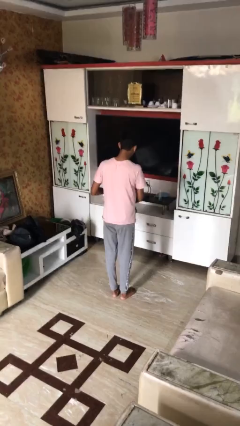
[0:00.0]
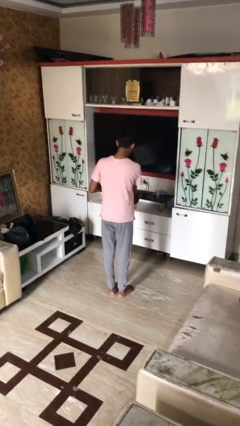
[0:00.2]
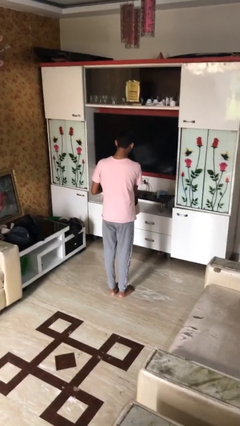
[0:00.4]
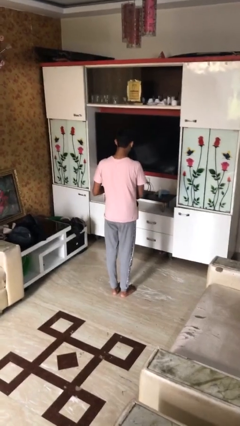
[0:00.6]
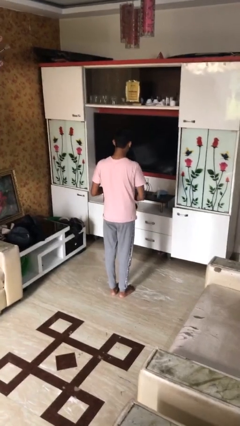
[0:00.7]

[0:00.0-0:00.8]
person puts object into bag

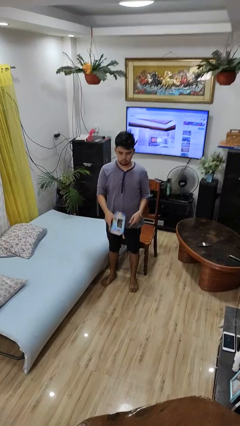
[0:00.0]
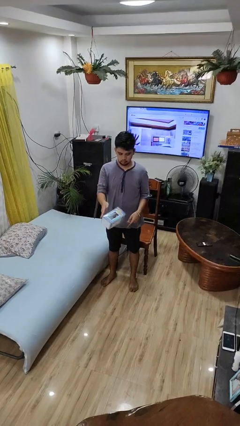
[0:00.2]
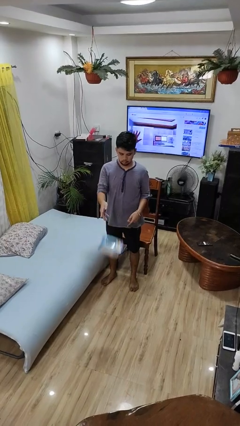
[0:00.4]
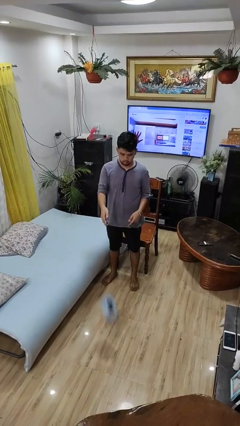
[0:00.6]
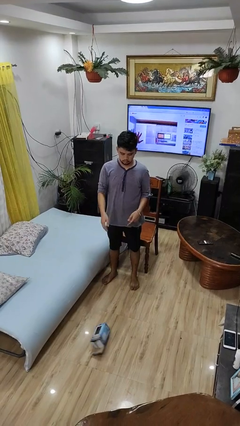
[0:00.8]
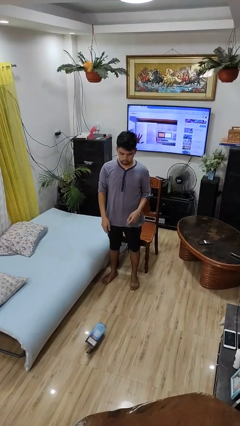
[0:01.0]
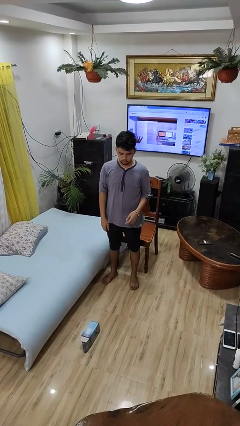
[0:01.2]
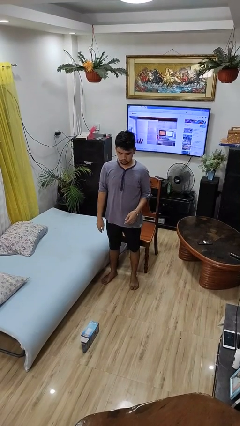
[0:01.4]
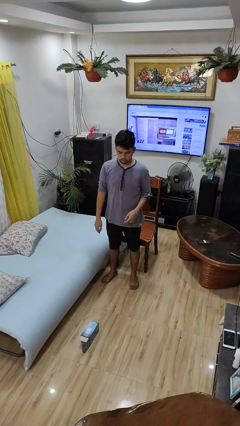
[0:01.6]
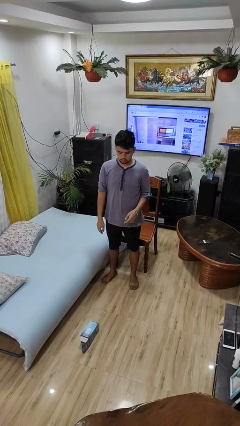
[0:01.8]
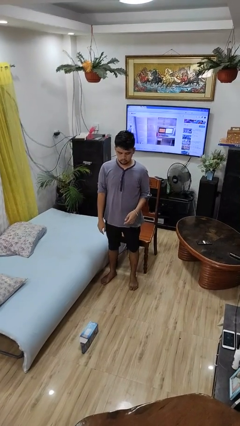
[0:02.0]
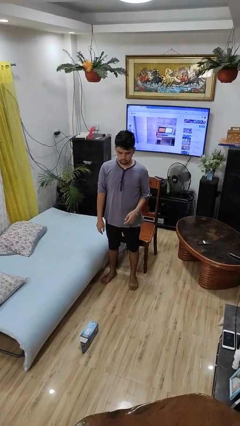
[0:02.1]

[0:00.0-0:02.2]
person throws object to ground

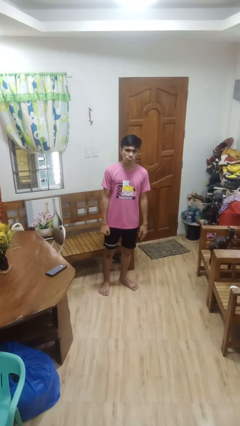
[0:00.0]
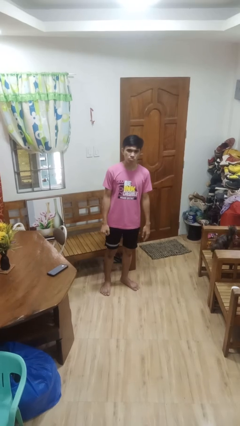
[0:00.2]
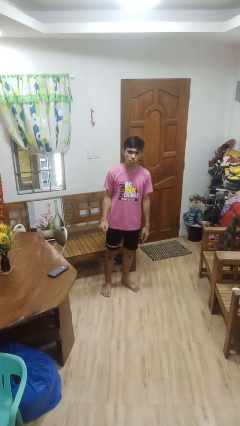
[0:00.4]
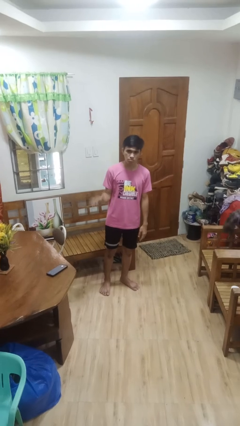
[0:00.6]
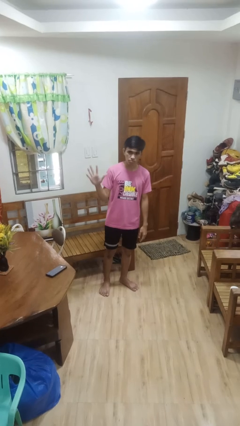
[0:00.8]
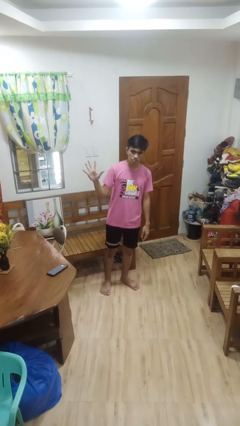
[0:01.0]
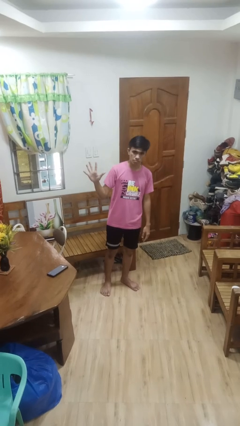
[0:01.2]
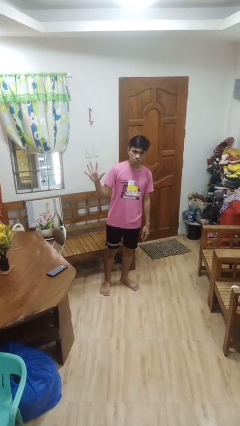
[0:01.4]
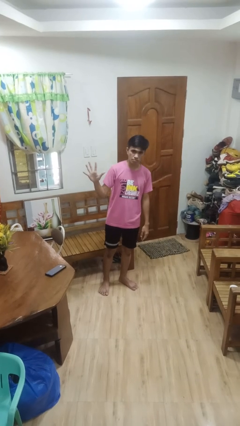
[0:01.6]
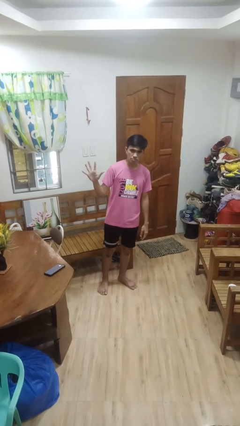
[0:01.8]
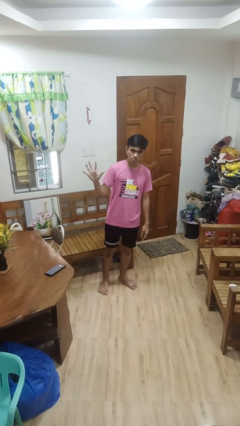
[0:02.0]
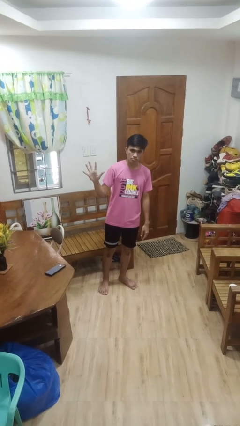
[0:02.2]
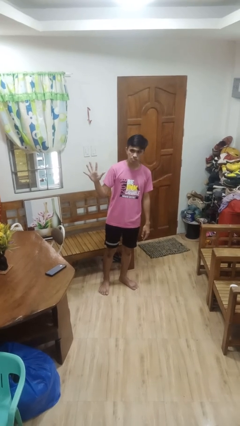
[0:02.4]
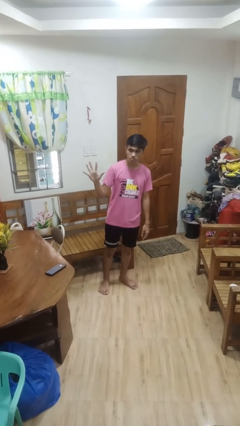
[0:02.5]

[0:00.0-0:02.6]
person gestures number five

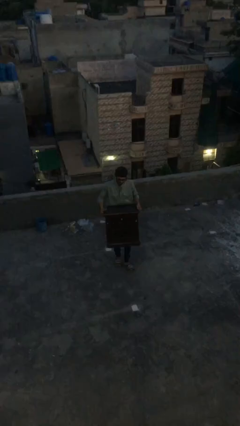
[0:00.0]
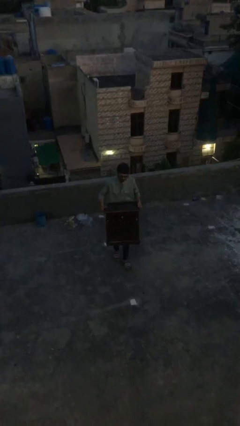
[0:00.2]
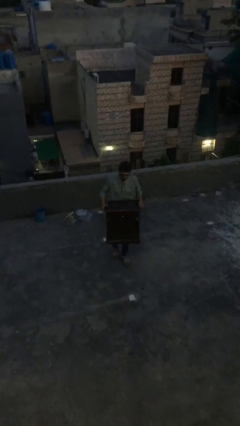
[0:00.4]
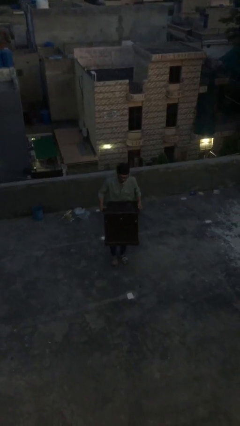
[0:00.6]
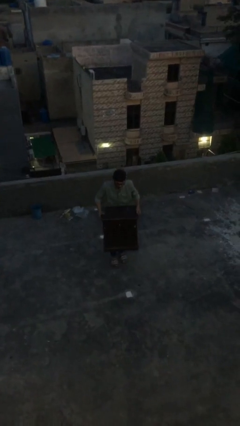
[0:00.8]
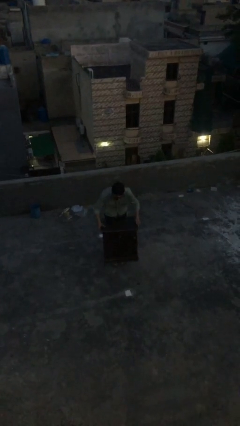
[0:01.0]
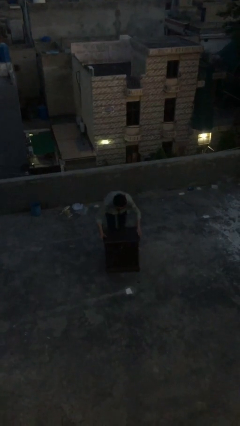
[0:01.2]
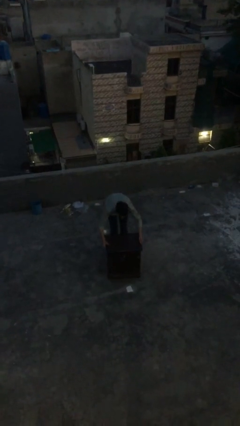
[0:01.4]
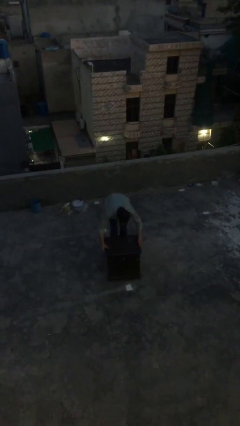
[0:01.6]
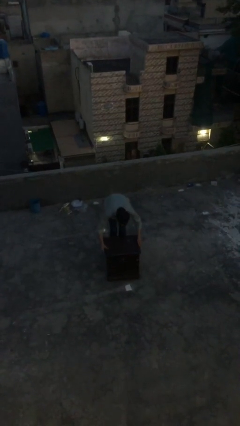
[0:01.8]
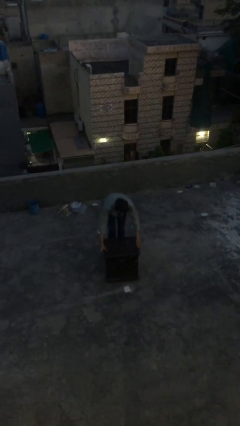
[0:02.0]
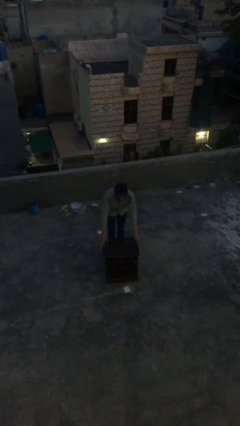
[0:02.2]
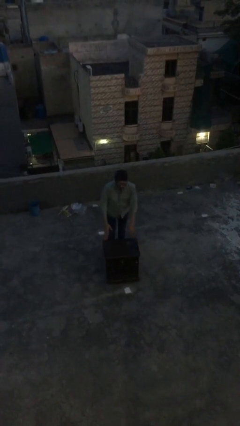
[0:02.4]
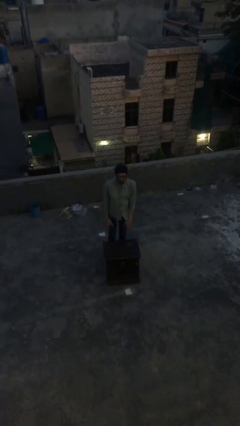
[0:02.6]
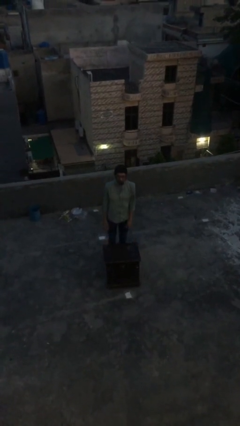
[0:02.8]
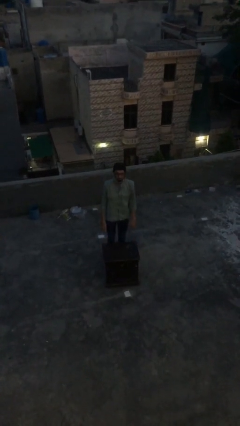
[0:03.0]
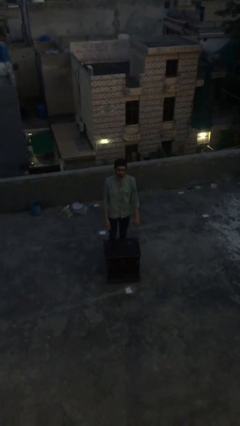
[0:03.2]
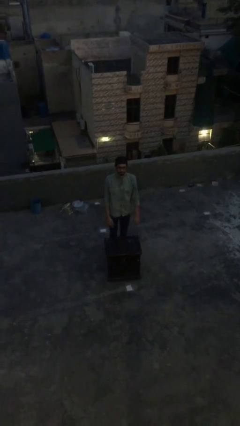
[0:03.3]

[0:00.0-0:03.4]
person puts down object on floor

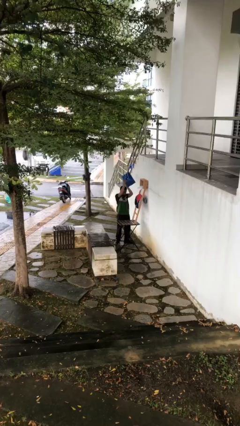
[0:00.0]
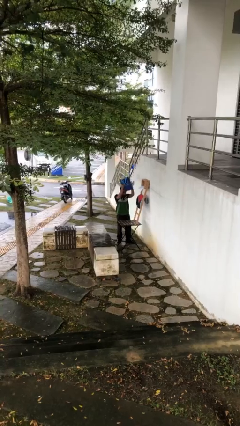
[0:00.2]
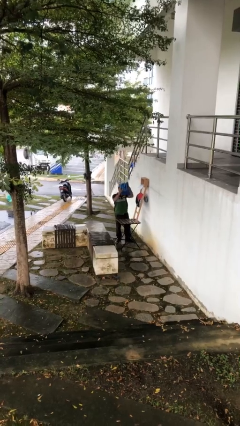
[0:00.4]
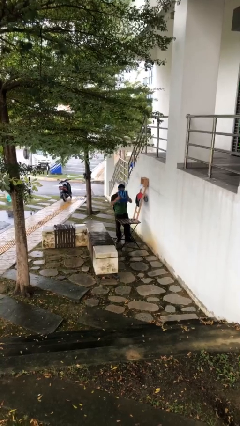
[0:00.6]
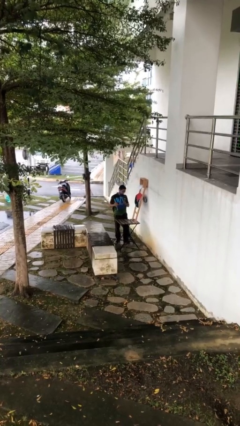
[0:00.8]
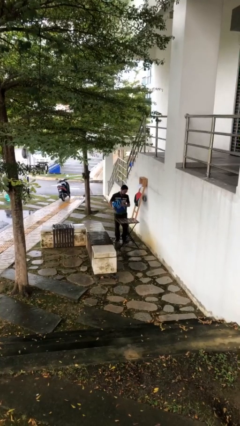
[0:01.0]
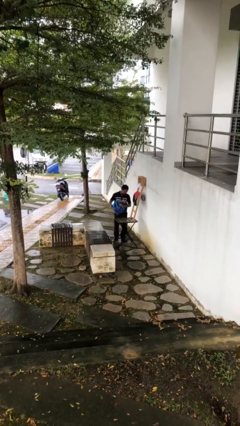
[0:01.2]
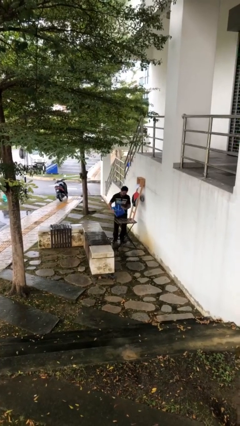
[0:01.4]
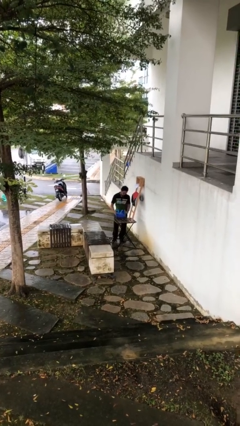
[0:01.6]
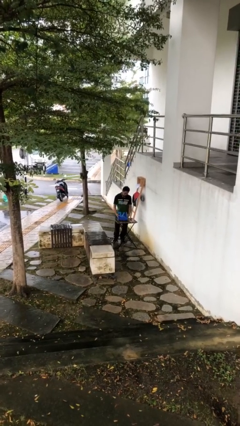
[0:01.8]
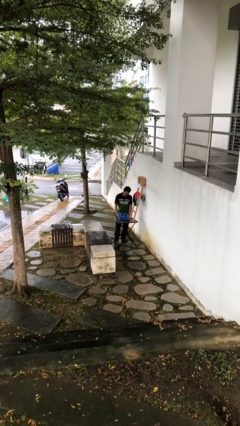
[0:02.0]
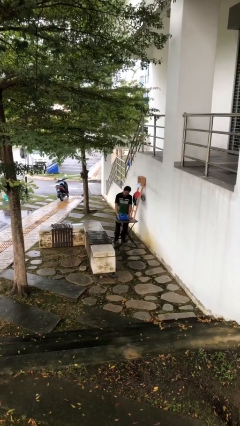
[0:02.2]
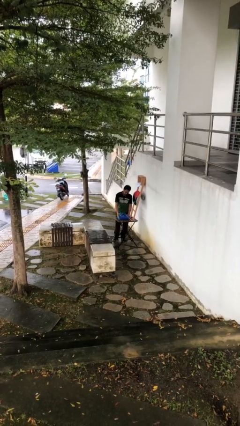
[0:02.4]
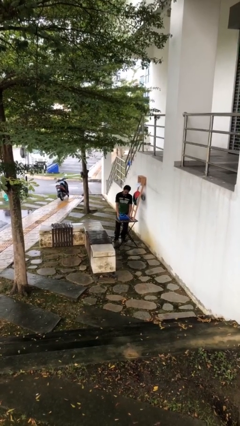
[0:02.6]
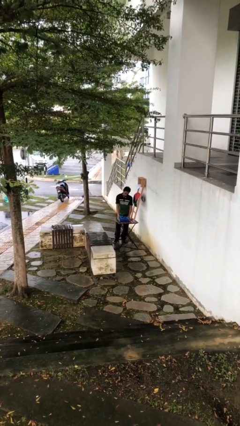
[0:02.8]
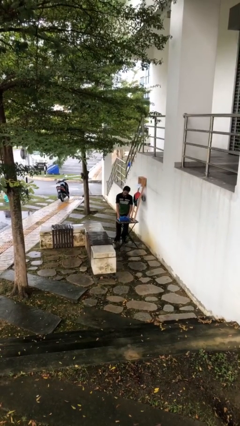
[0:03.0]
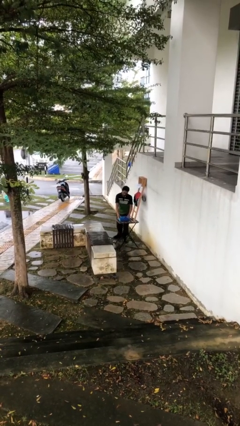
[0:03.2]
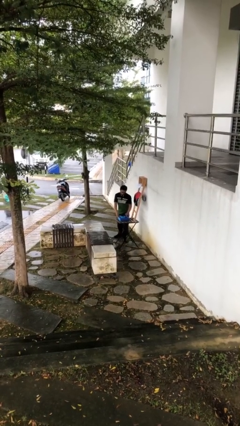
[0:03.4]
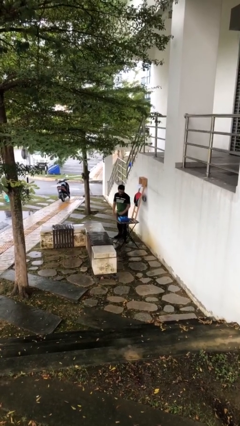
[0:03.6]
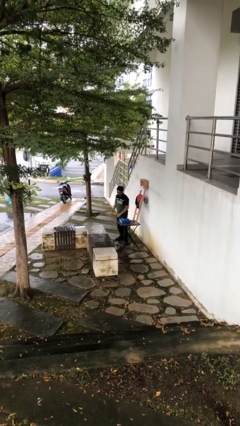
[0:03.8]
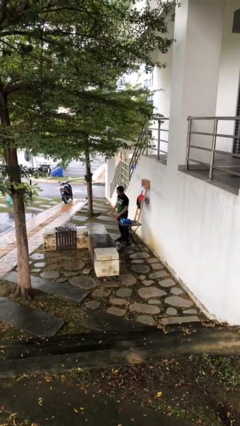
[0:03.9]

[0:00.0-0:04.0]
person puts down object on table

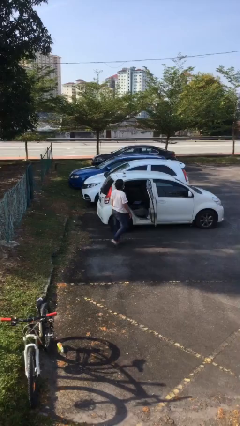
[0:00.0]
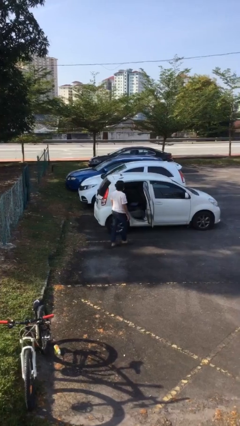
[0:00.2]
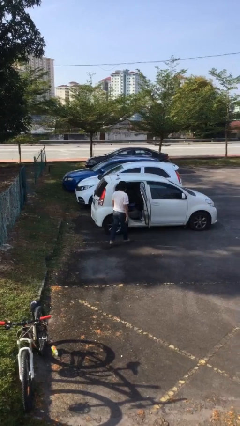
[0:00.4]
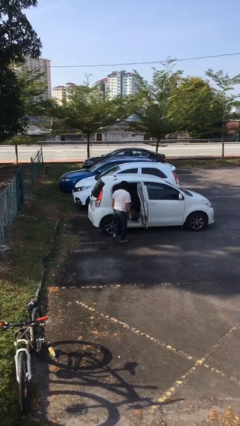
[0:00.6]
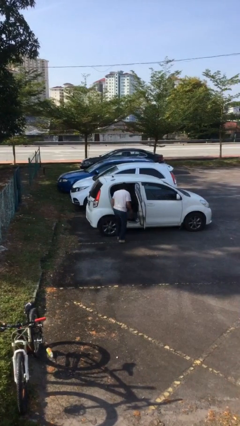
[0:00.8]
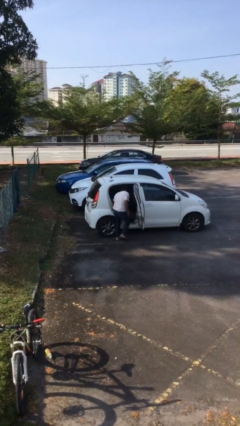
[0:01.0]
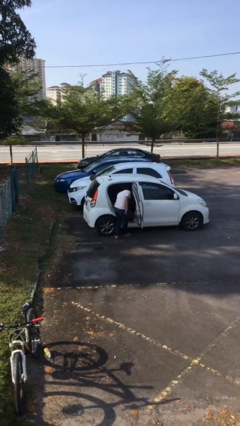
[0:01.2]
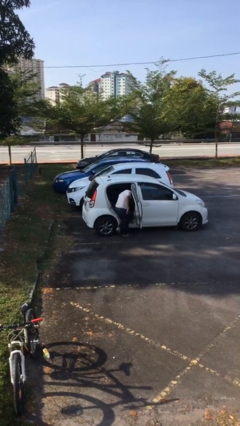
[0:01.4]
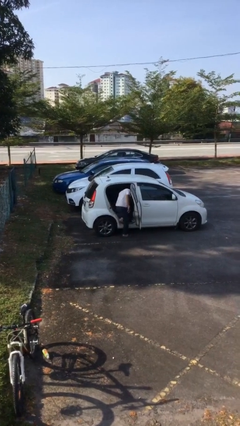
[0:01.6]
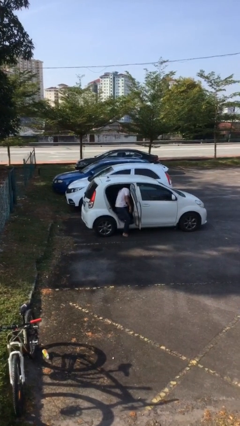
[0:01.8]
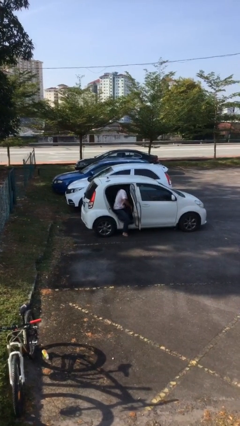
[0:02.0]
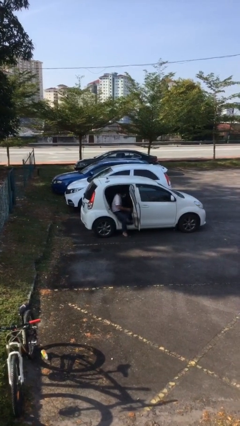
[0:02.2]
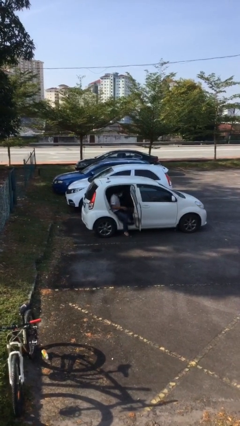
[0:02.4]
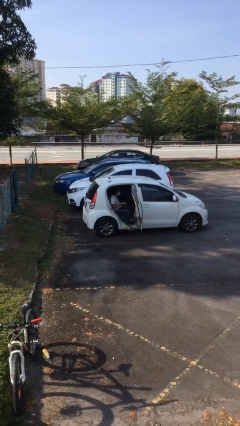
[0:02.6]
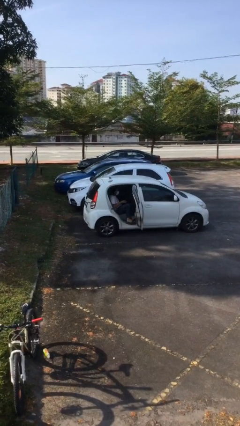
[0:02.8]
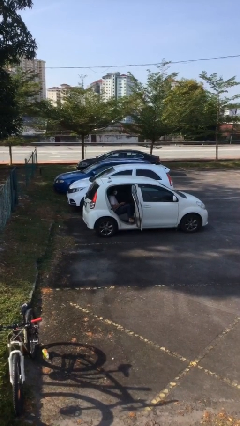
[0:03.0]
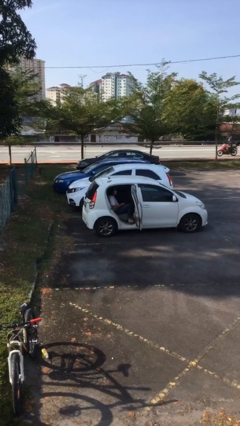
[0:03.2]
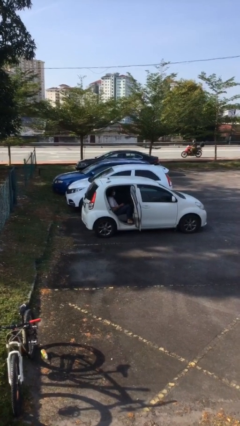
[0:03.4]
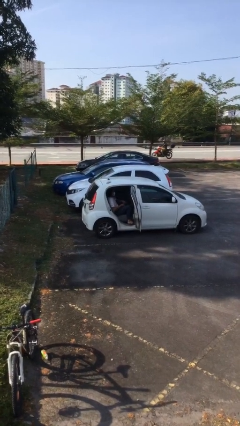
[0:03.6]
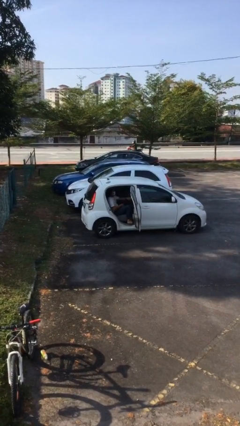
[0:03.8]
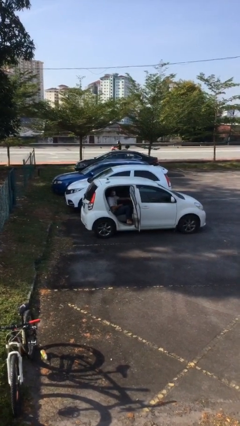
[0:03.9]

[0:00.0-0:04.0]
person enters car

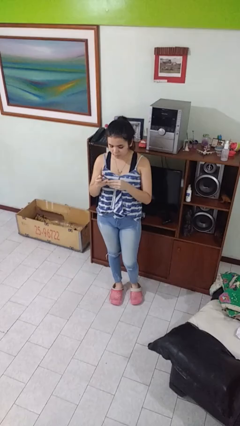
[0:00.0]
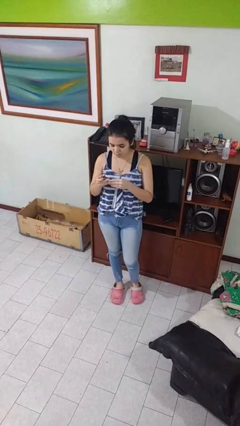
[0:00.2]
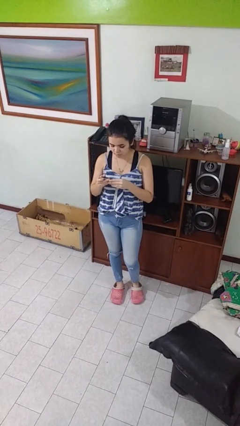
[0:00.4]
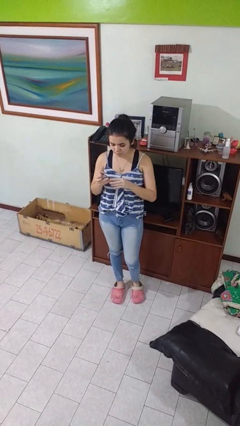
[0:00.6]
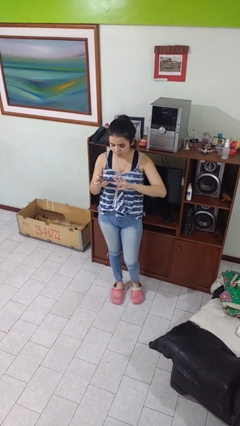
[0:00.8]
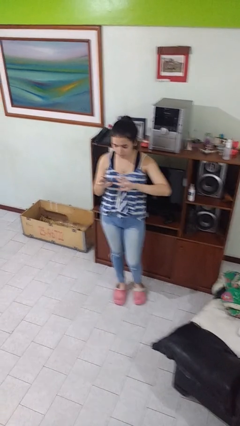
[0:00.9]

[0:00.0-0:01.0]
person clips fingernails
